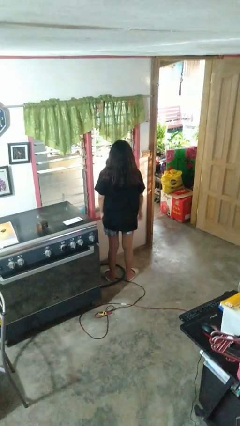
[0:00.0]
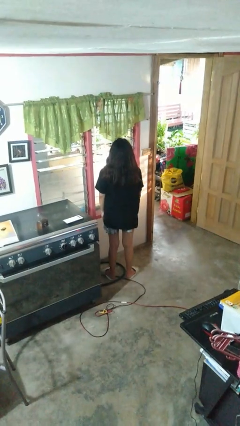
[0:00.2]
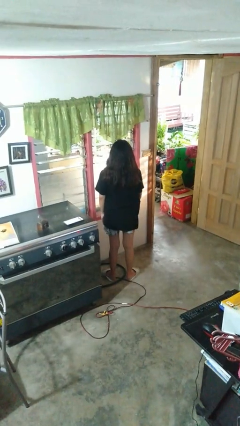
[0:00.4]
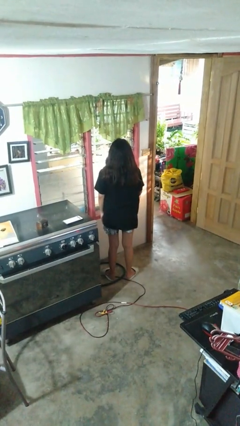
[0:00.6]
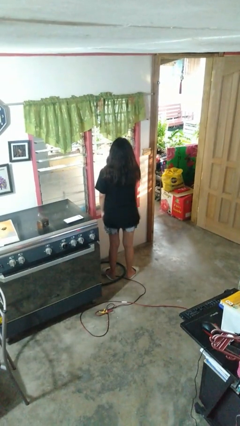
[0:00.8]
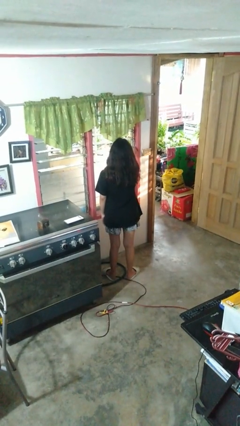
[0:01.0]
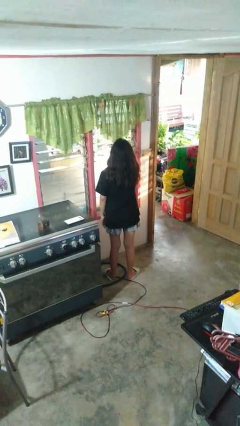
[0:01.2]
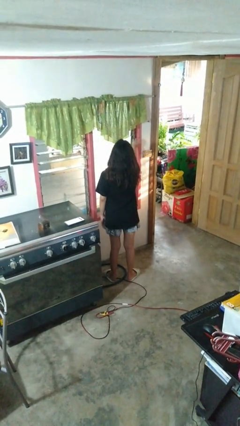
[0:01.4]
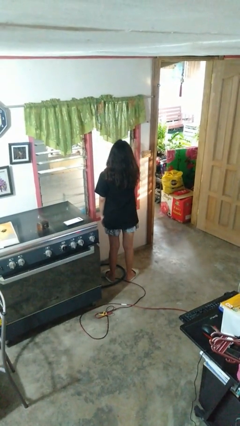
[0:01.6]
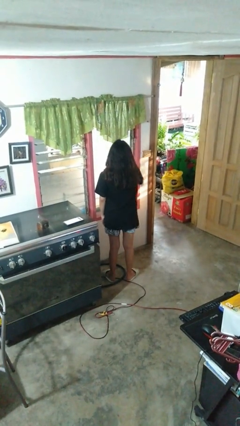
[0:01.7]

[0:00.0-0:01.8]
person closes home window

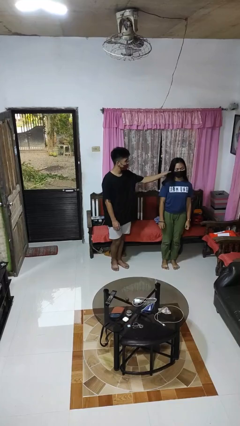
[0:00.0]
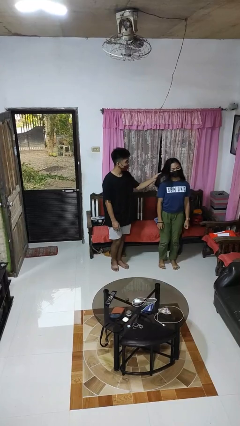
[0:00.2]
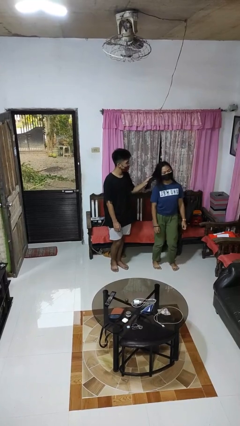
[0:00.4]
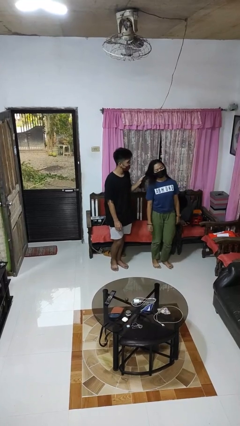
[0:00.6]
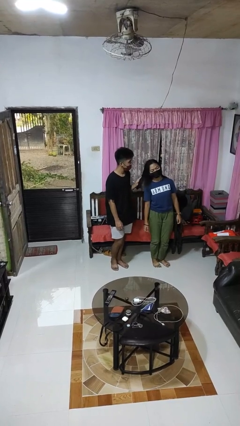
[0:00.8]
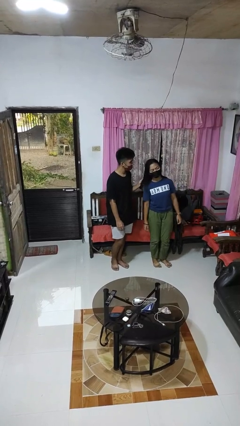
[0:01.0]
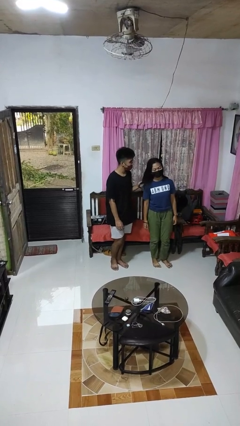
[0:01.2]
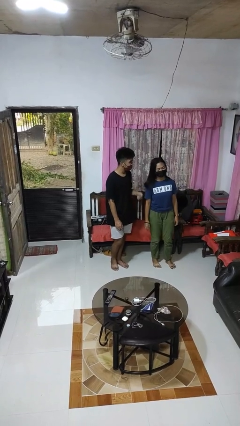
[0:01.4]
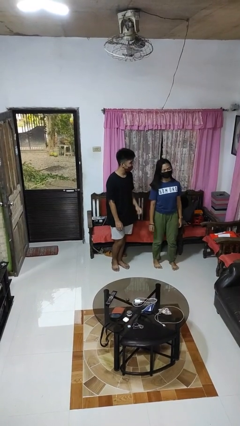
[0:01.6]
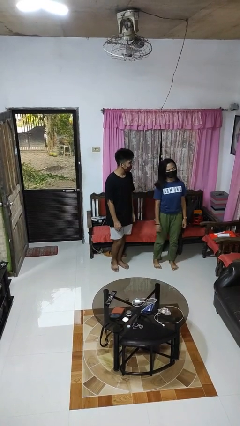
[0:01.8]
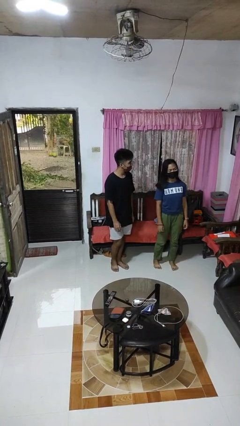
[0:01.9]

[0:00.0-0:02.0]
person grabs person by hair

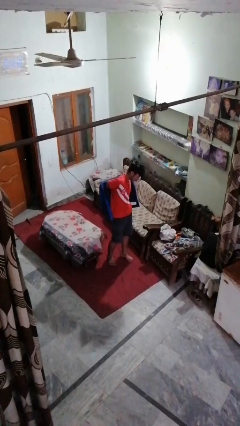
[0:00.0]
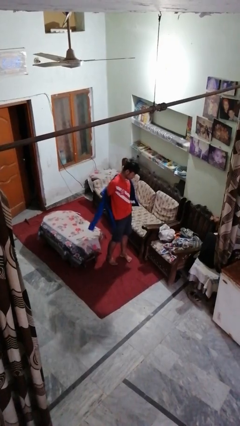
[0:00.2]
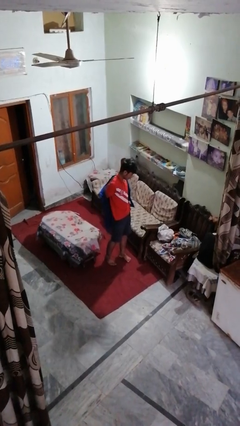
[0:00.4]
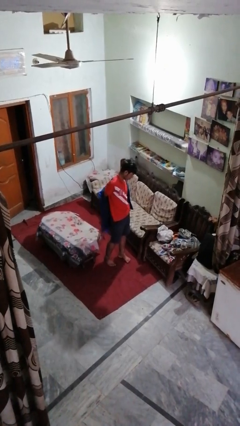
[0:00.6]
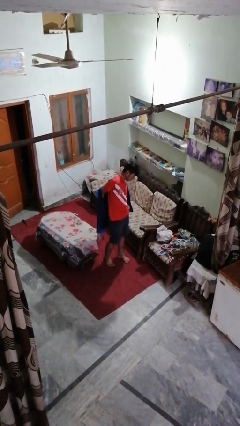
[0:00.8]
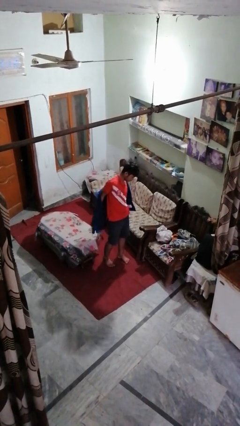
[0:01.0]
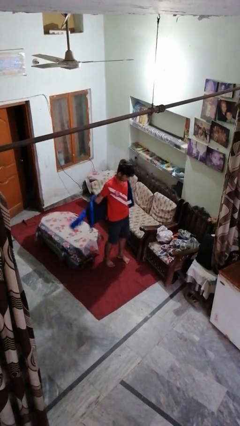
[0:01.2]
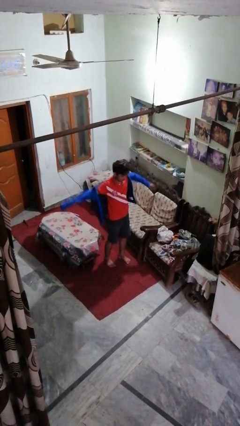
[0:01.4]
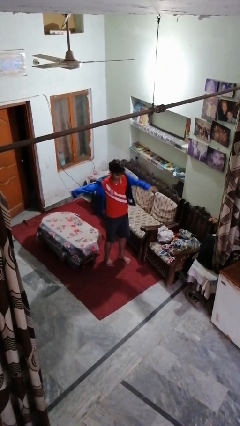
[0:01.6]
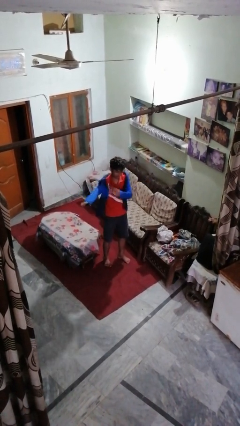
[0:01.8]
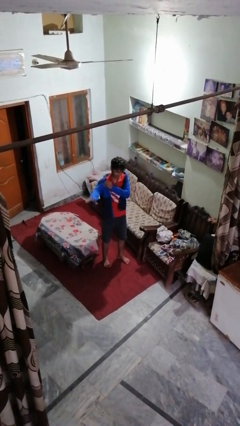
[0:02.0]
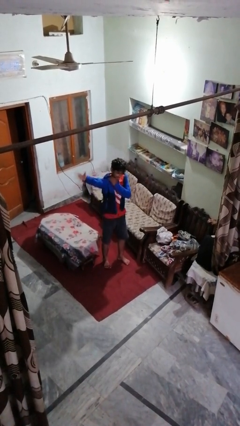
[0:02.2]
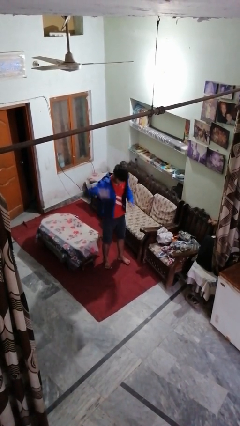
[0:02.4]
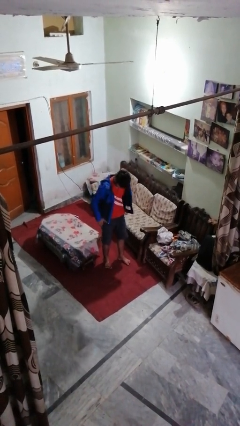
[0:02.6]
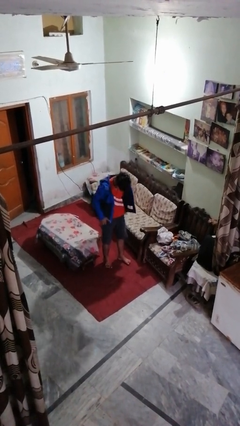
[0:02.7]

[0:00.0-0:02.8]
person puts on jacket

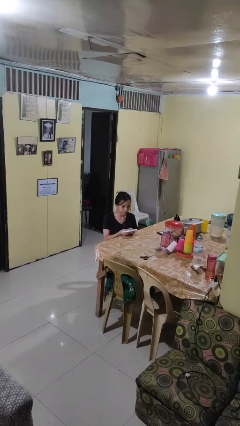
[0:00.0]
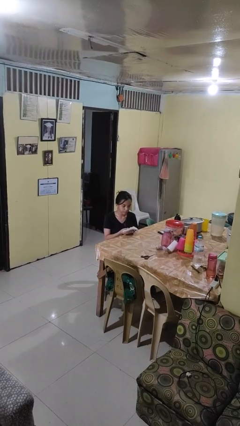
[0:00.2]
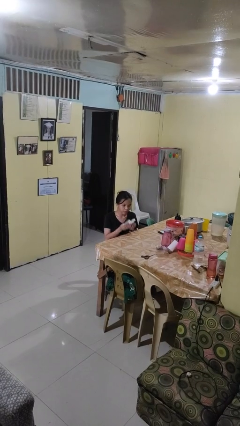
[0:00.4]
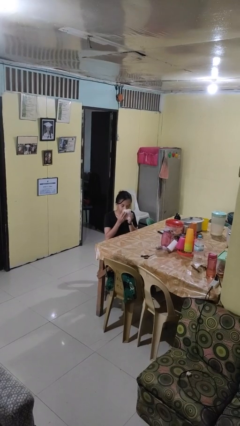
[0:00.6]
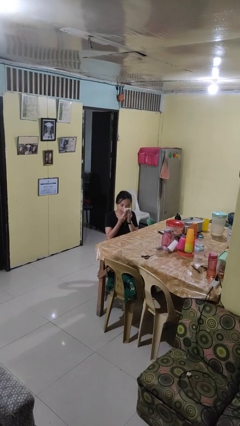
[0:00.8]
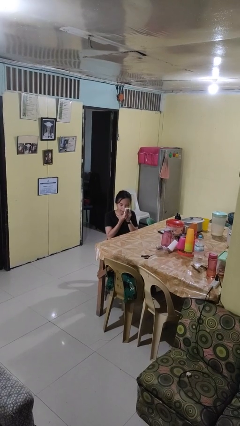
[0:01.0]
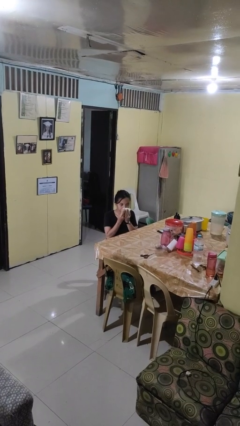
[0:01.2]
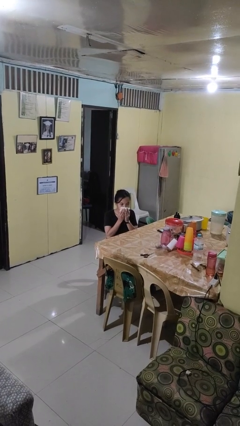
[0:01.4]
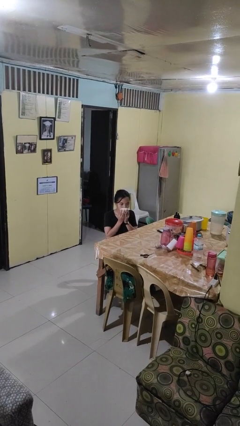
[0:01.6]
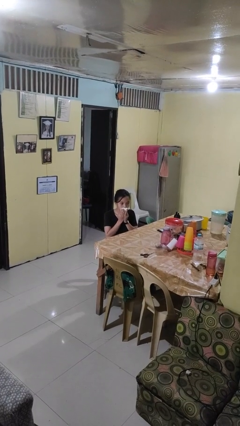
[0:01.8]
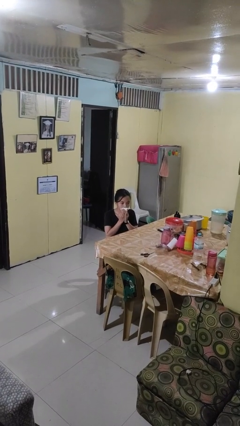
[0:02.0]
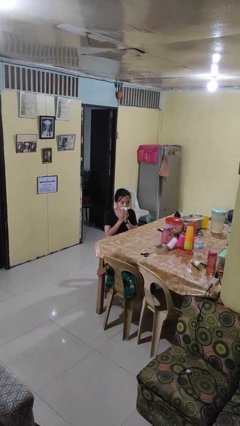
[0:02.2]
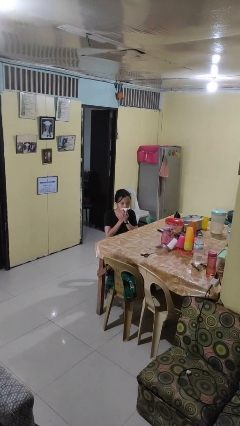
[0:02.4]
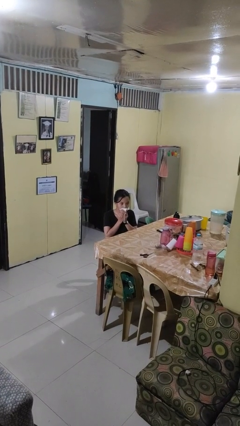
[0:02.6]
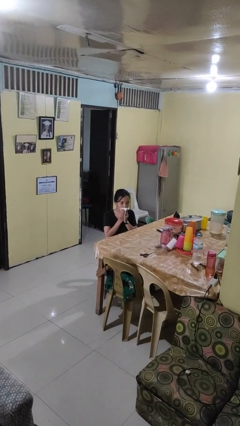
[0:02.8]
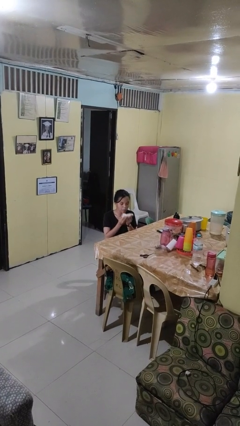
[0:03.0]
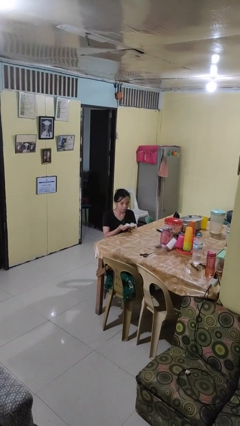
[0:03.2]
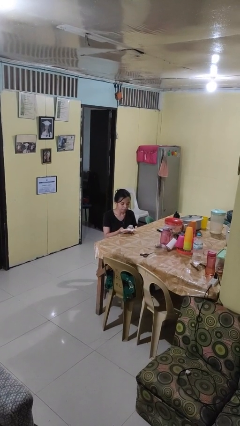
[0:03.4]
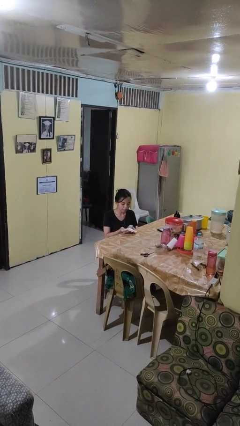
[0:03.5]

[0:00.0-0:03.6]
person wipes mouth with napkin

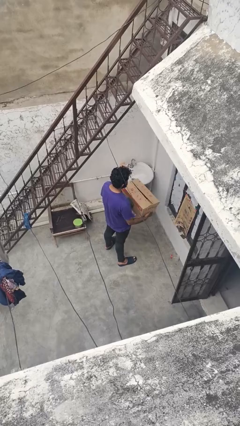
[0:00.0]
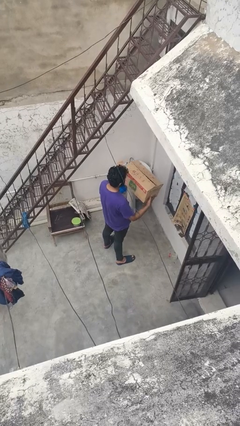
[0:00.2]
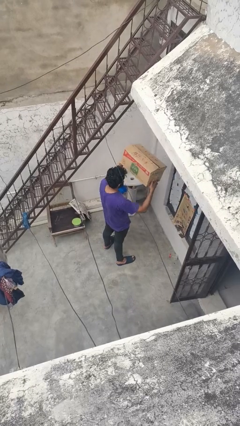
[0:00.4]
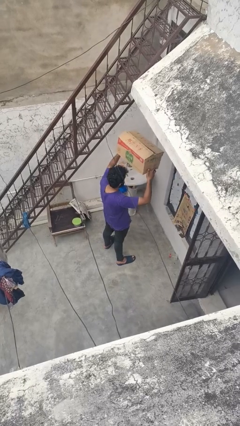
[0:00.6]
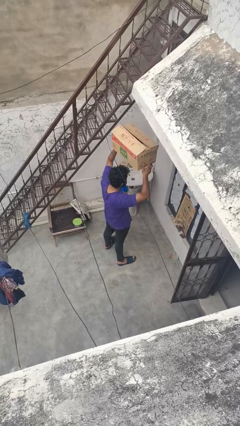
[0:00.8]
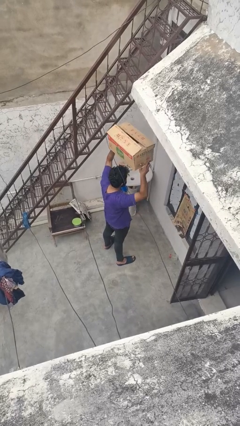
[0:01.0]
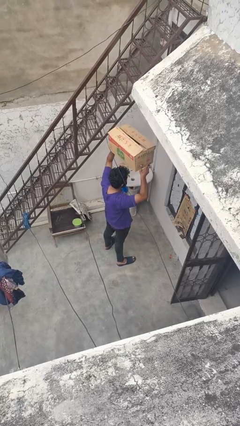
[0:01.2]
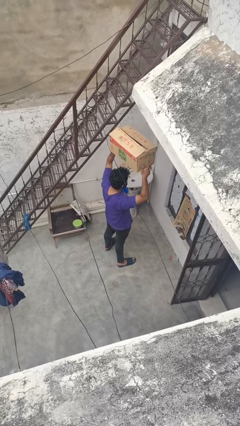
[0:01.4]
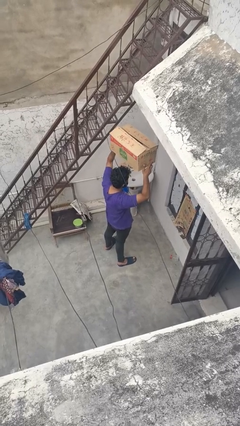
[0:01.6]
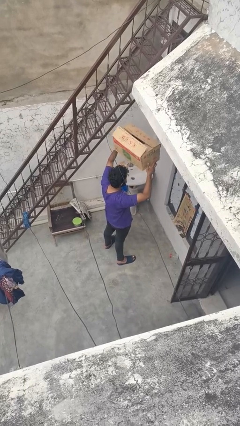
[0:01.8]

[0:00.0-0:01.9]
person holds object above head

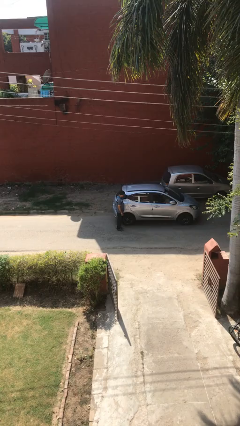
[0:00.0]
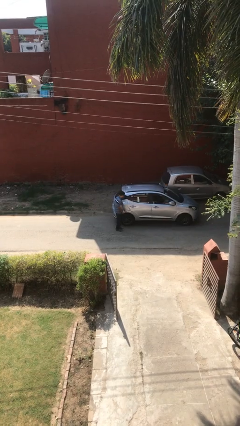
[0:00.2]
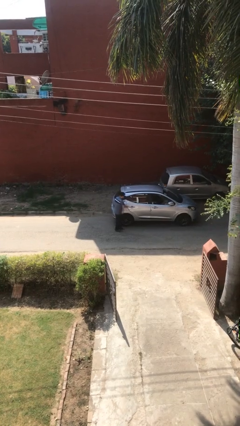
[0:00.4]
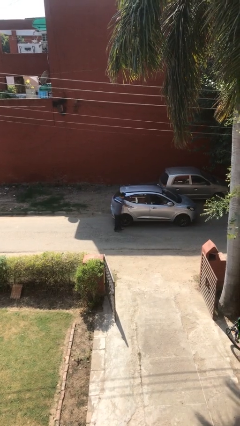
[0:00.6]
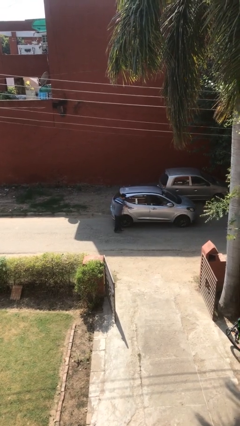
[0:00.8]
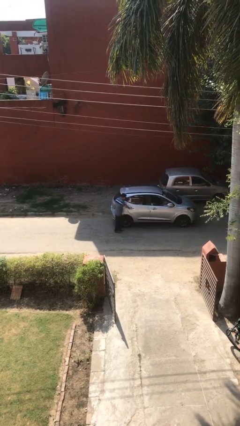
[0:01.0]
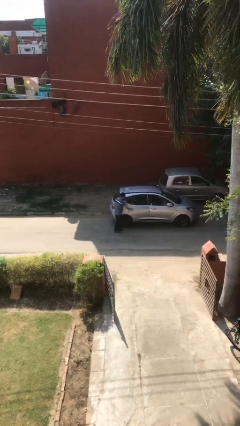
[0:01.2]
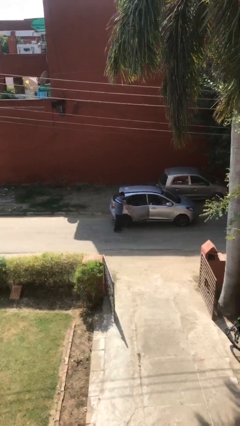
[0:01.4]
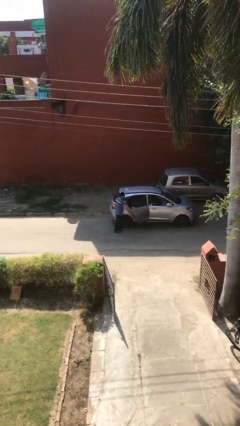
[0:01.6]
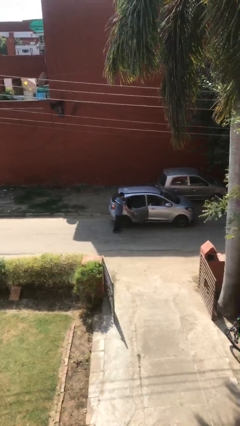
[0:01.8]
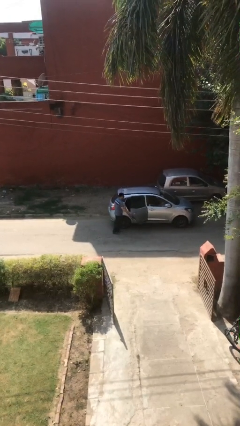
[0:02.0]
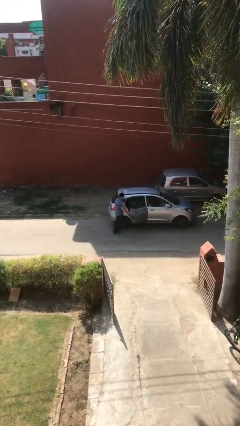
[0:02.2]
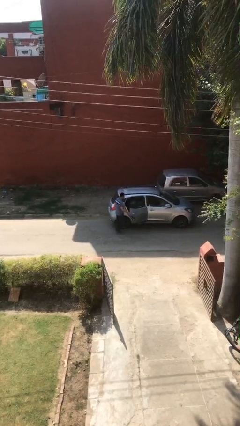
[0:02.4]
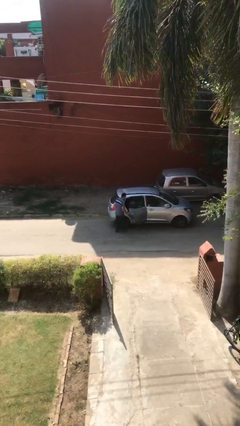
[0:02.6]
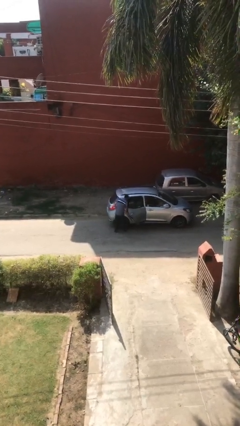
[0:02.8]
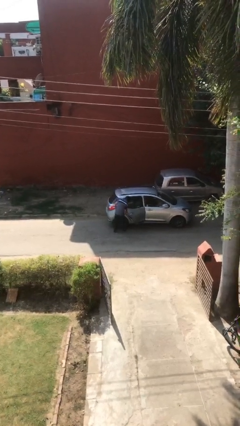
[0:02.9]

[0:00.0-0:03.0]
person opens car door

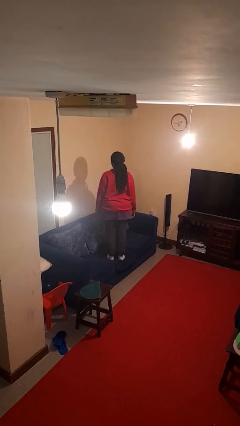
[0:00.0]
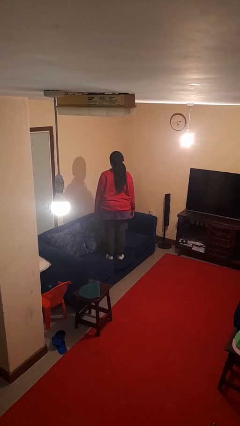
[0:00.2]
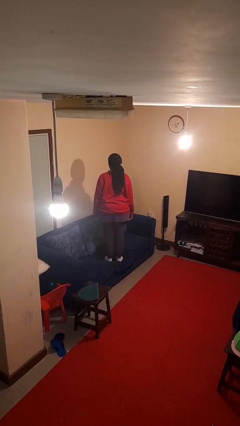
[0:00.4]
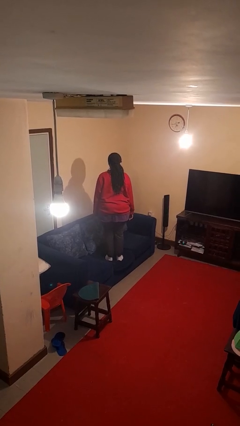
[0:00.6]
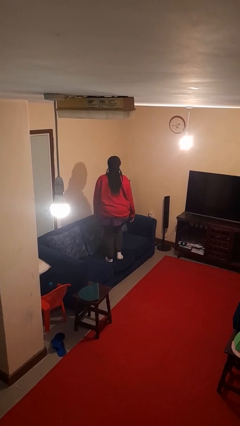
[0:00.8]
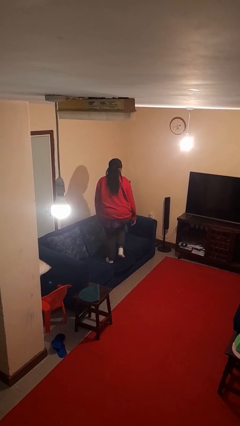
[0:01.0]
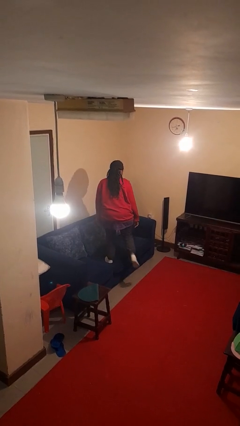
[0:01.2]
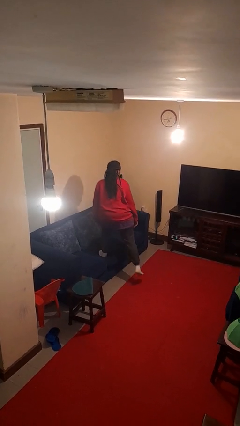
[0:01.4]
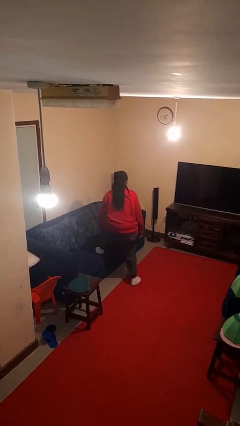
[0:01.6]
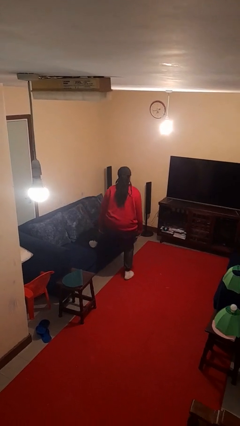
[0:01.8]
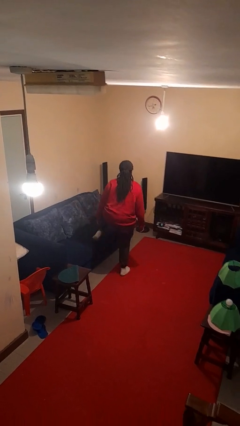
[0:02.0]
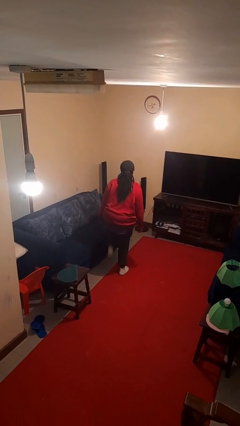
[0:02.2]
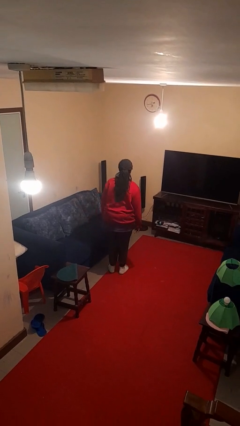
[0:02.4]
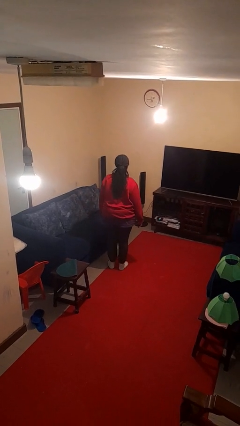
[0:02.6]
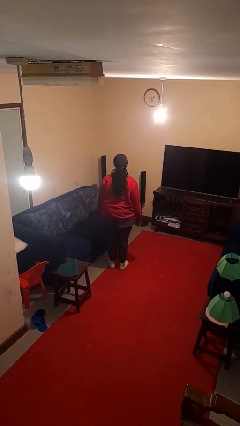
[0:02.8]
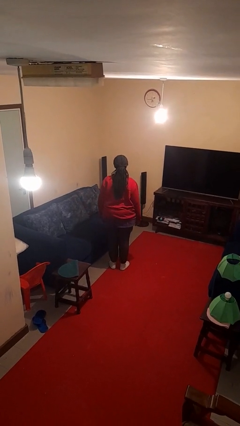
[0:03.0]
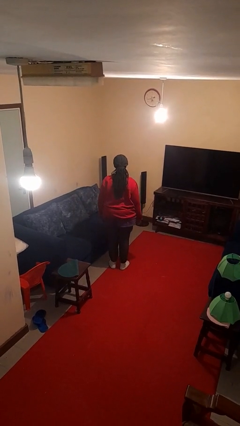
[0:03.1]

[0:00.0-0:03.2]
person climbs off couch
